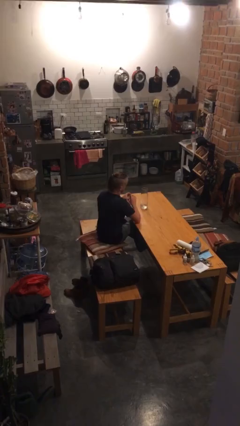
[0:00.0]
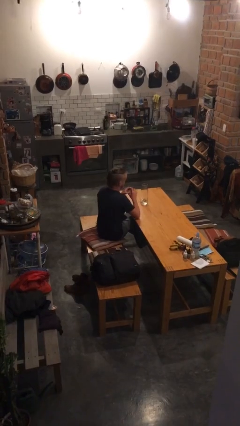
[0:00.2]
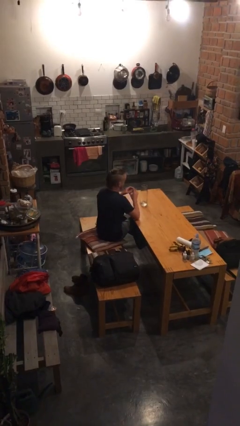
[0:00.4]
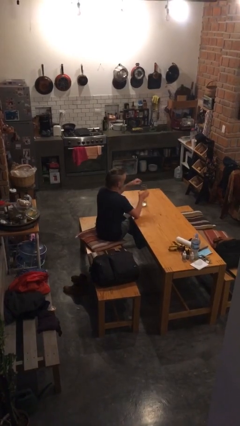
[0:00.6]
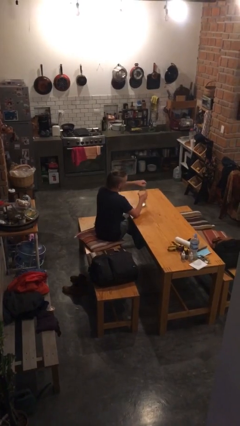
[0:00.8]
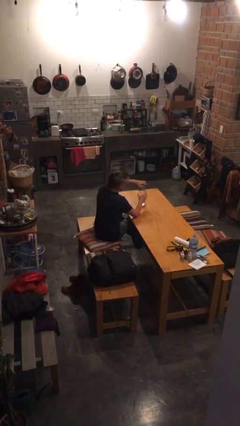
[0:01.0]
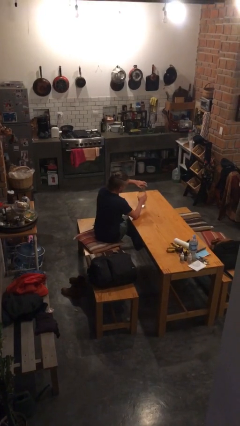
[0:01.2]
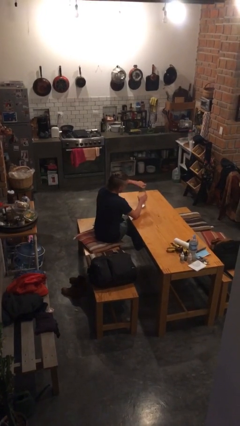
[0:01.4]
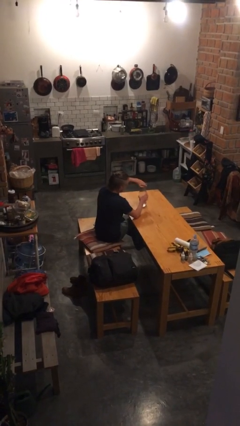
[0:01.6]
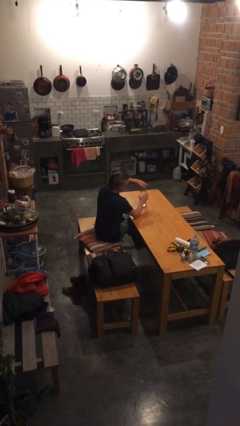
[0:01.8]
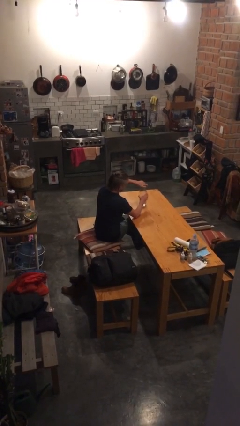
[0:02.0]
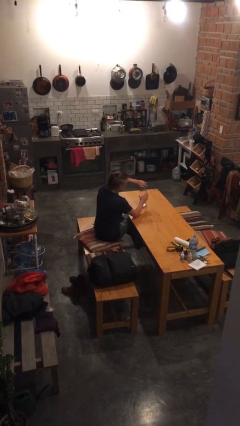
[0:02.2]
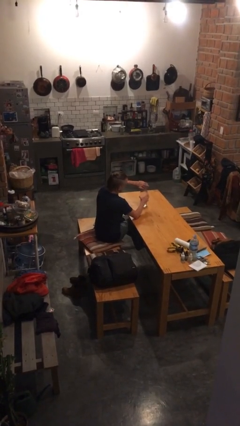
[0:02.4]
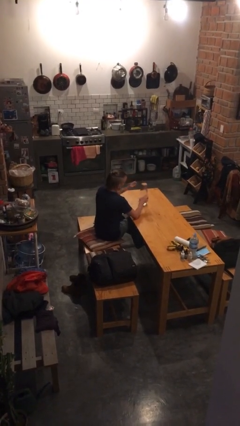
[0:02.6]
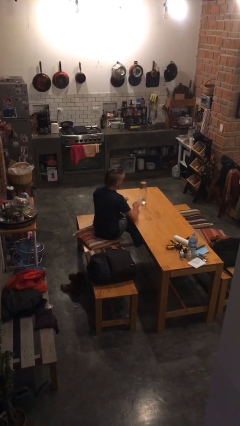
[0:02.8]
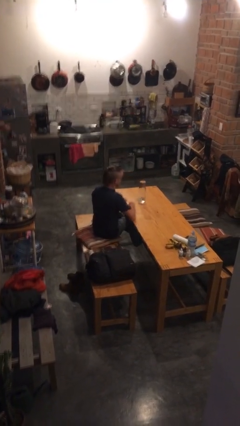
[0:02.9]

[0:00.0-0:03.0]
person closes jar

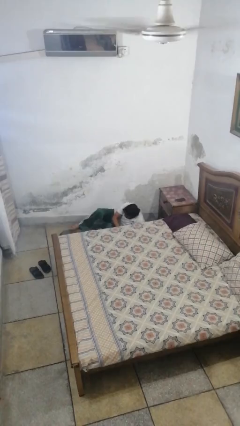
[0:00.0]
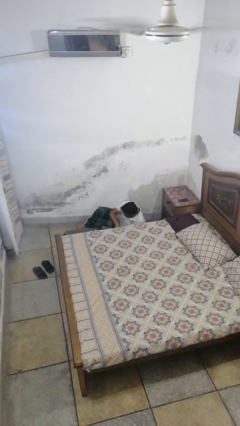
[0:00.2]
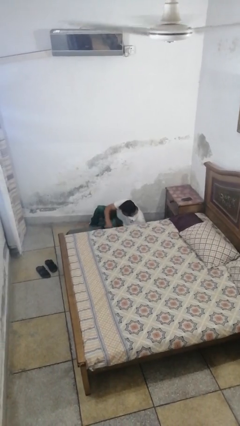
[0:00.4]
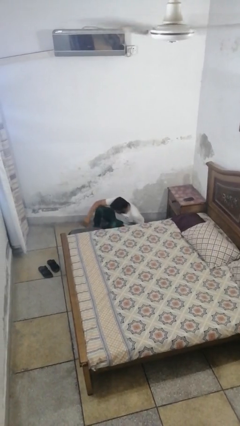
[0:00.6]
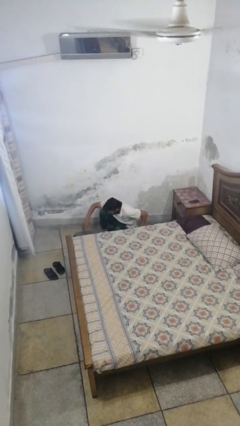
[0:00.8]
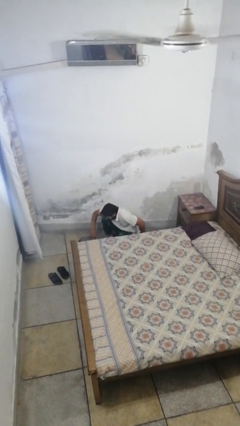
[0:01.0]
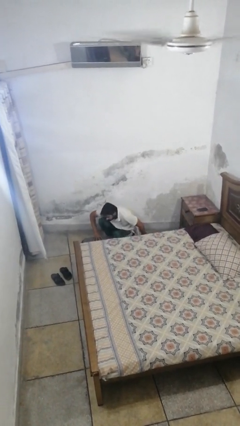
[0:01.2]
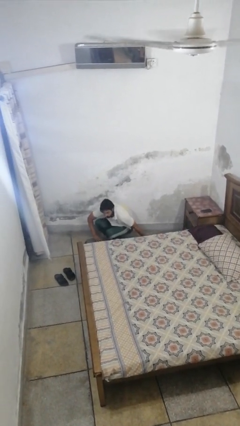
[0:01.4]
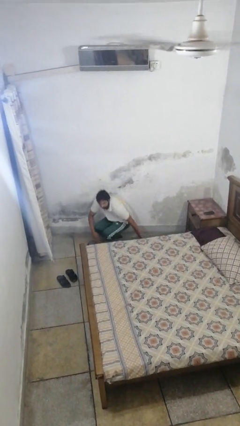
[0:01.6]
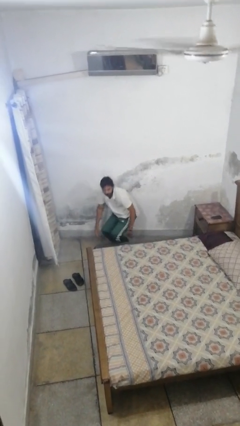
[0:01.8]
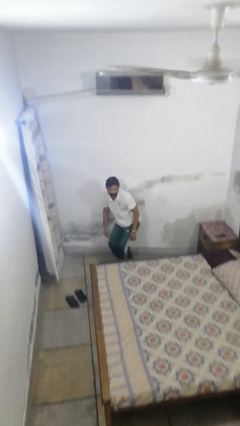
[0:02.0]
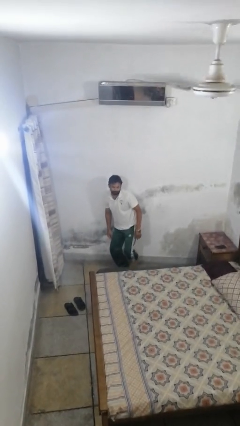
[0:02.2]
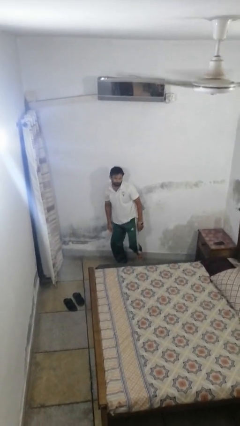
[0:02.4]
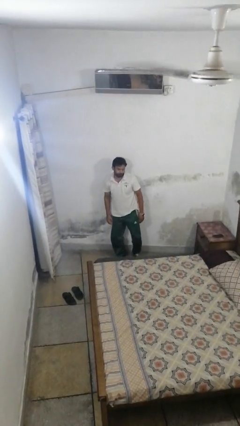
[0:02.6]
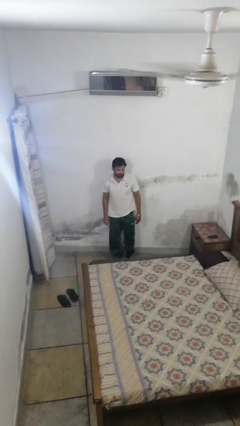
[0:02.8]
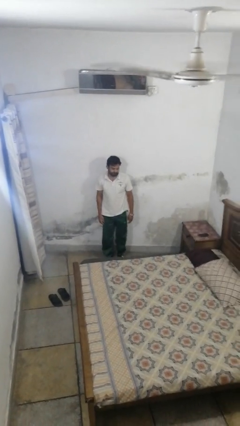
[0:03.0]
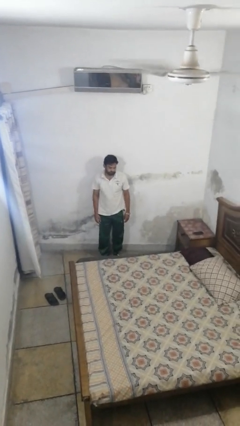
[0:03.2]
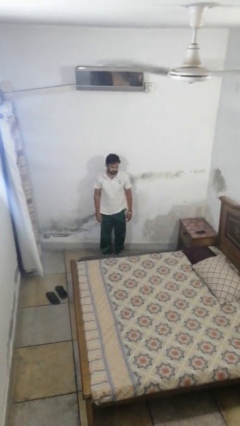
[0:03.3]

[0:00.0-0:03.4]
person stands up from floor

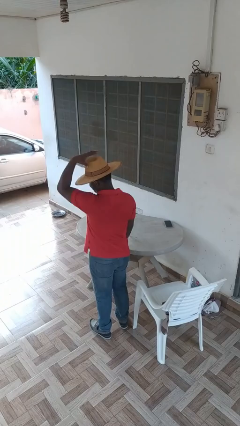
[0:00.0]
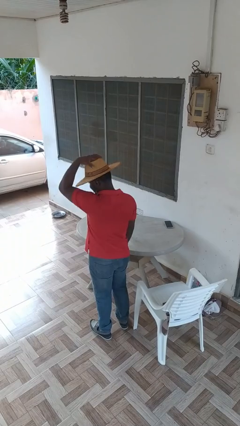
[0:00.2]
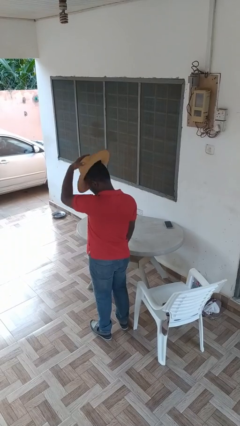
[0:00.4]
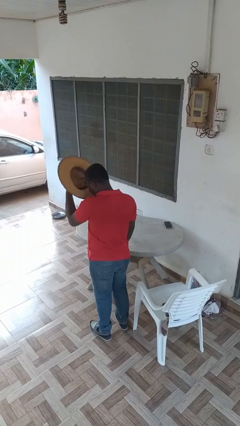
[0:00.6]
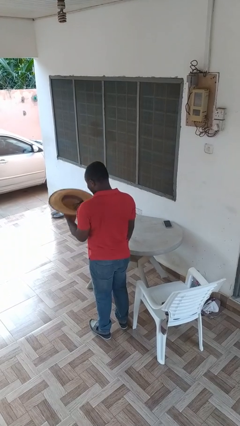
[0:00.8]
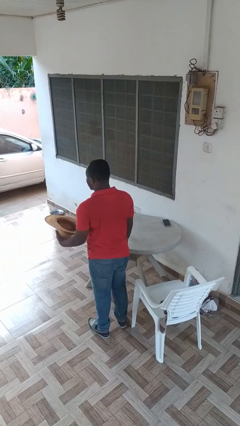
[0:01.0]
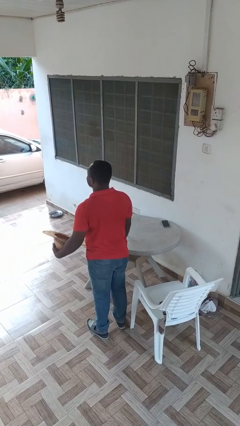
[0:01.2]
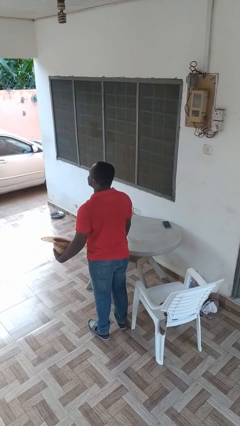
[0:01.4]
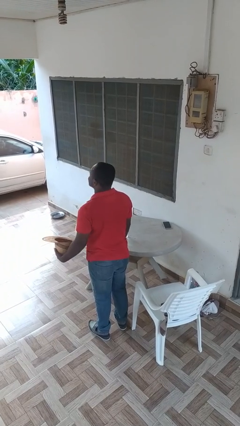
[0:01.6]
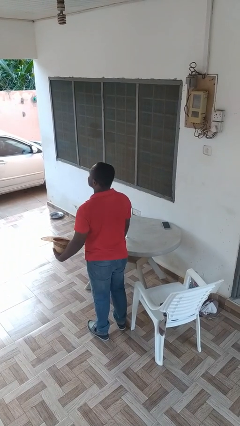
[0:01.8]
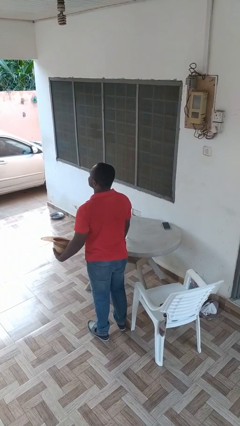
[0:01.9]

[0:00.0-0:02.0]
person takes off hat

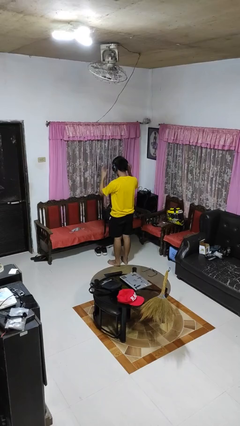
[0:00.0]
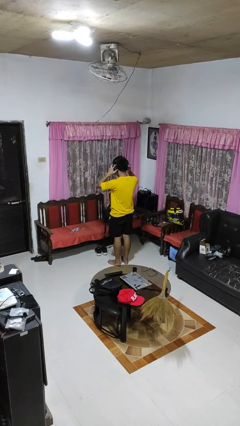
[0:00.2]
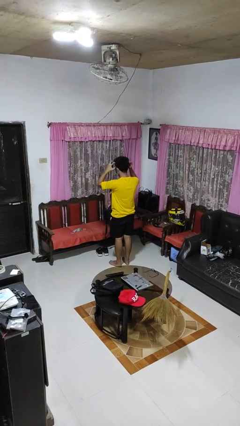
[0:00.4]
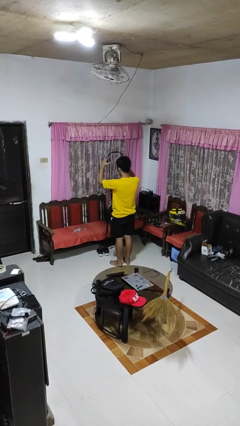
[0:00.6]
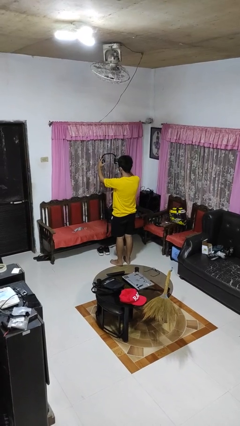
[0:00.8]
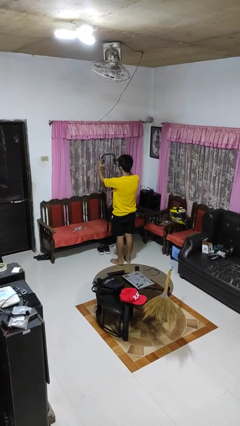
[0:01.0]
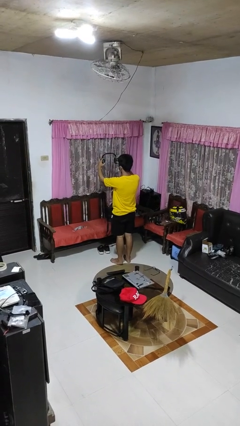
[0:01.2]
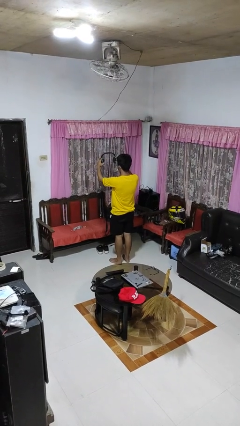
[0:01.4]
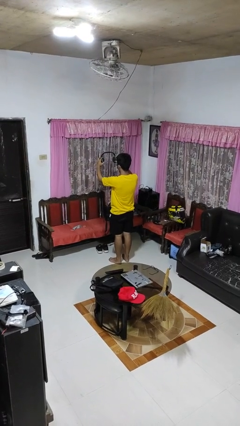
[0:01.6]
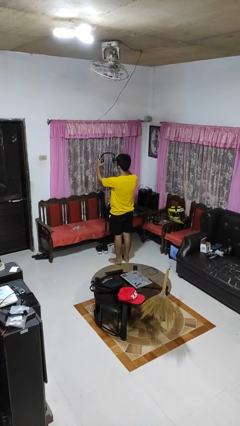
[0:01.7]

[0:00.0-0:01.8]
person takes off headphones

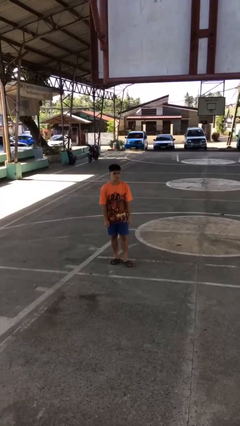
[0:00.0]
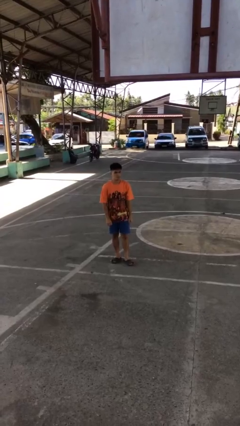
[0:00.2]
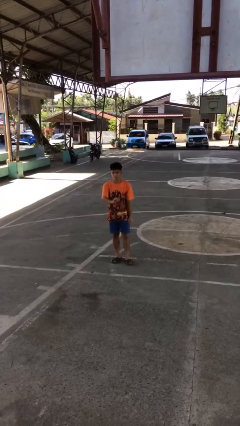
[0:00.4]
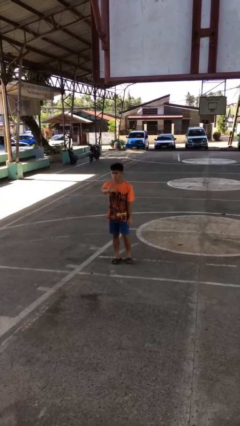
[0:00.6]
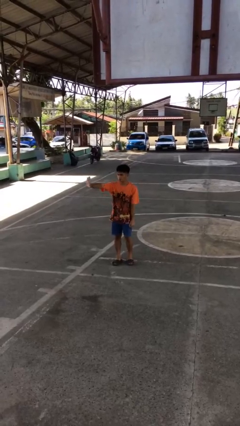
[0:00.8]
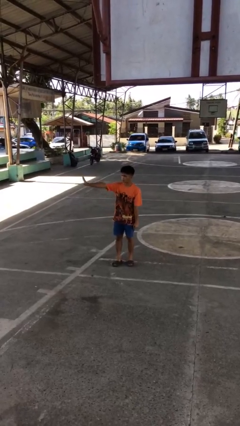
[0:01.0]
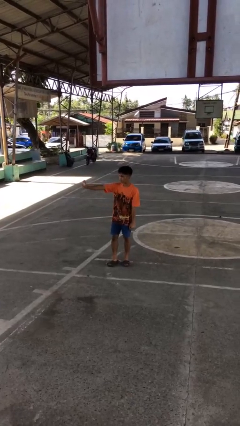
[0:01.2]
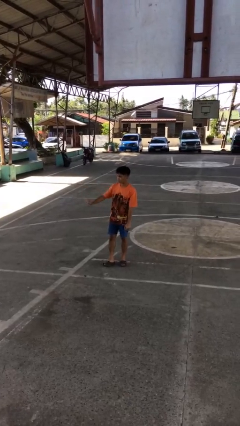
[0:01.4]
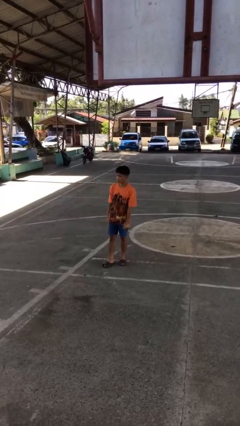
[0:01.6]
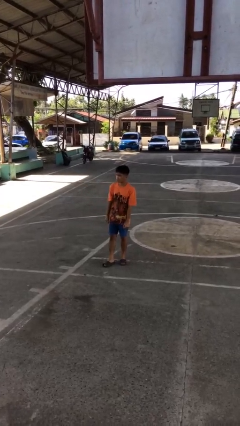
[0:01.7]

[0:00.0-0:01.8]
person gestures swipe right

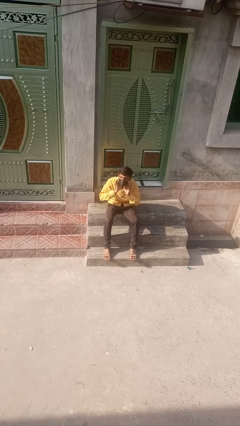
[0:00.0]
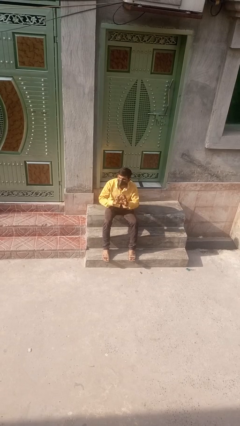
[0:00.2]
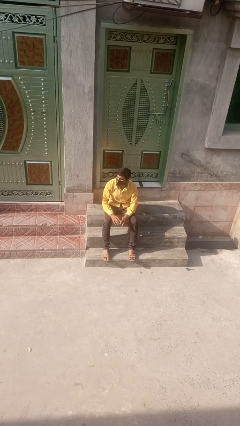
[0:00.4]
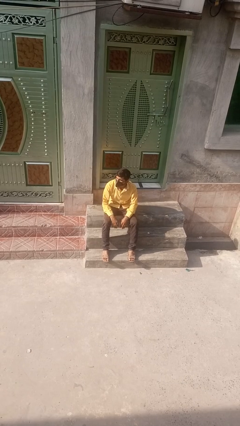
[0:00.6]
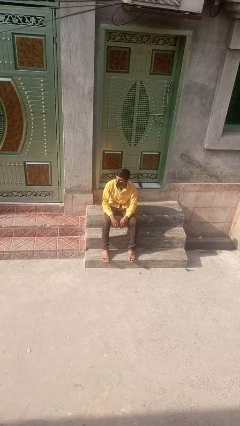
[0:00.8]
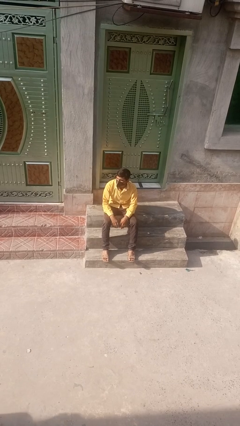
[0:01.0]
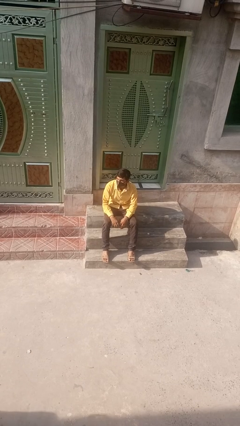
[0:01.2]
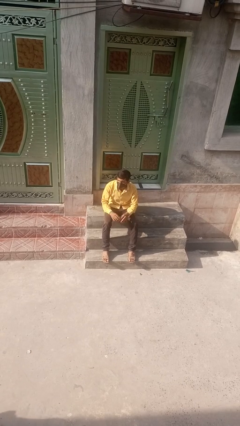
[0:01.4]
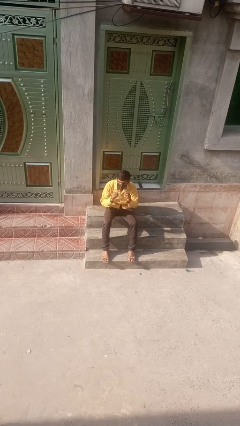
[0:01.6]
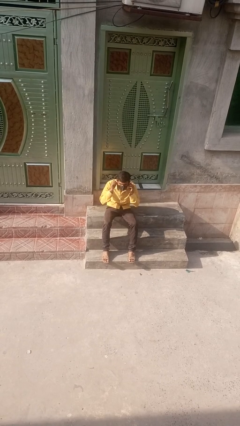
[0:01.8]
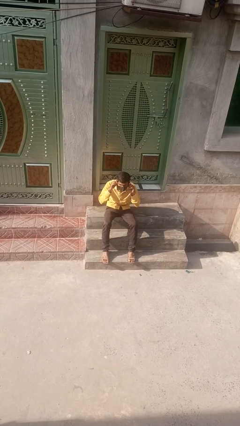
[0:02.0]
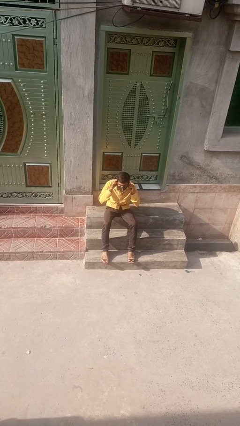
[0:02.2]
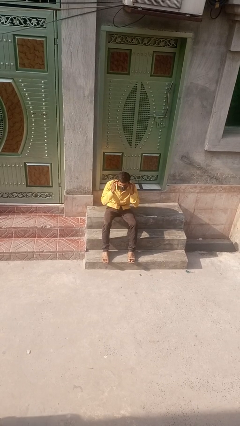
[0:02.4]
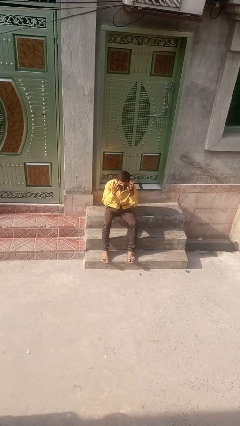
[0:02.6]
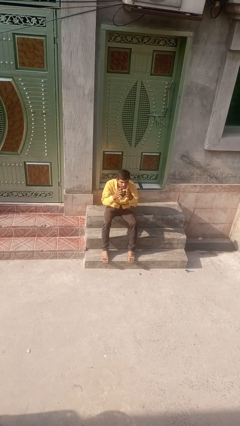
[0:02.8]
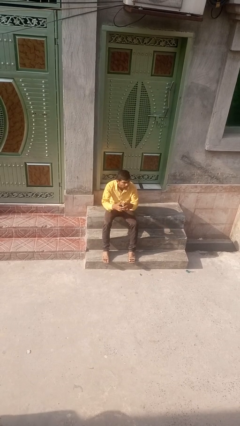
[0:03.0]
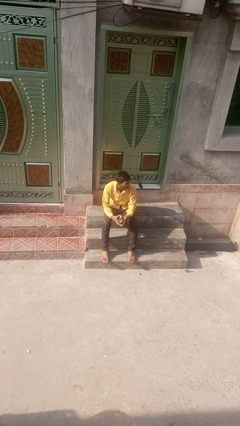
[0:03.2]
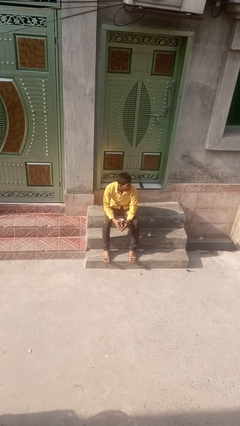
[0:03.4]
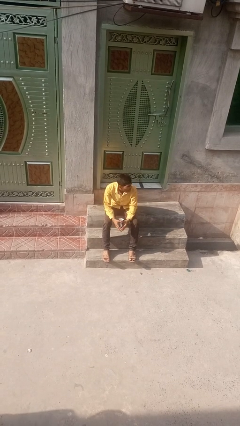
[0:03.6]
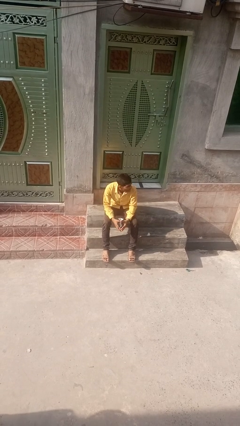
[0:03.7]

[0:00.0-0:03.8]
person takes off facemask

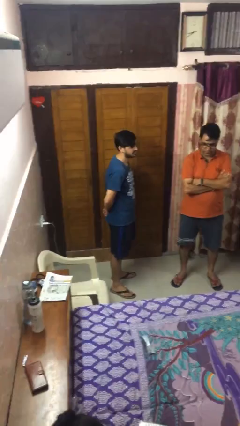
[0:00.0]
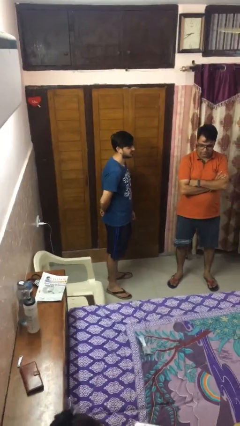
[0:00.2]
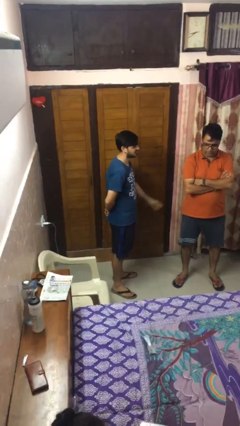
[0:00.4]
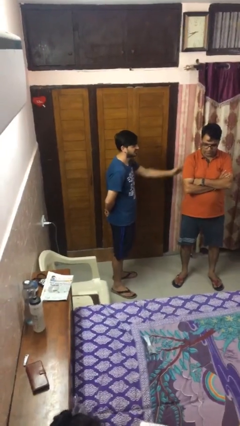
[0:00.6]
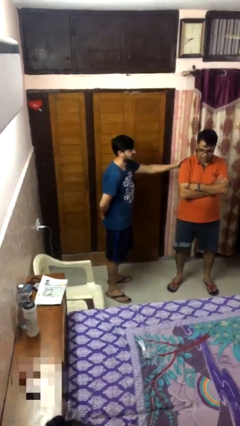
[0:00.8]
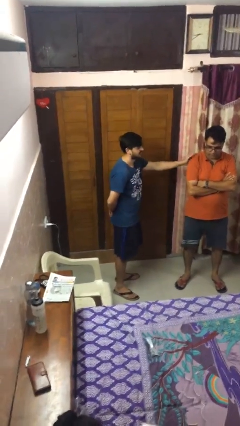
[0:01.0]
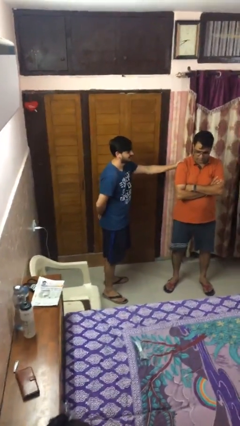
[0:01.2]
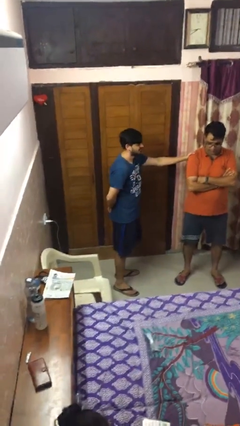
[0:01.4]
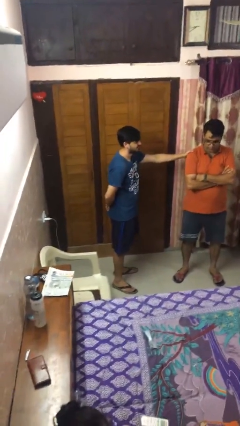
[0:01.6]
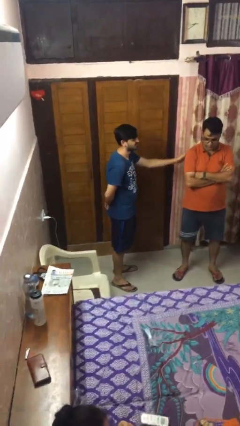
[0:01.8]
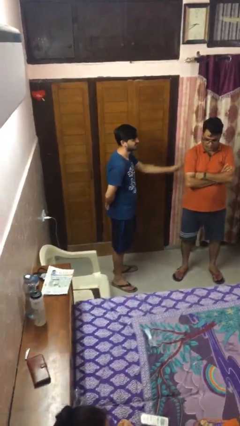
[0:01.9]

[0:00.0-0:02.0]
person pounds shoulders of person
